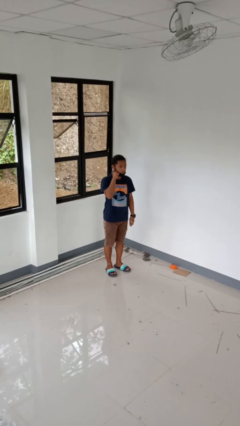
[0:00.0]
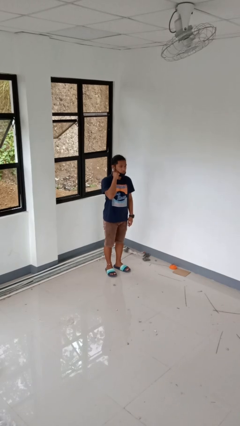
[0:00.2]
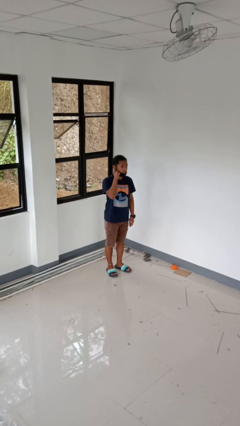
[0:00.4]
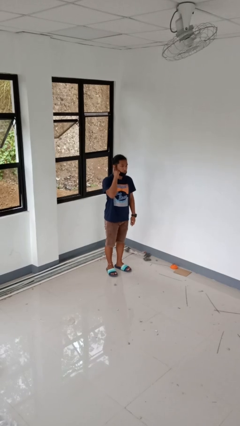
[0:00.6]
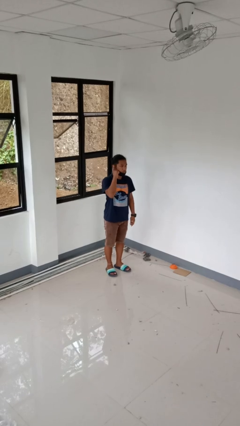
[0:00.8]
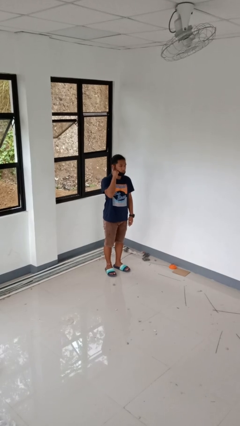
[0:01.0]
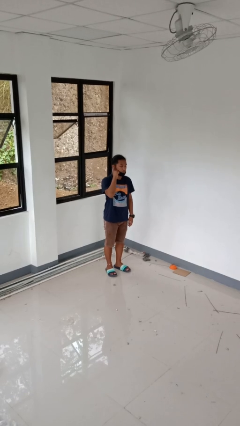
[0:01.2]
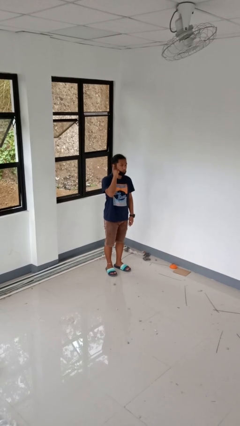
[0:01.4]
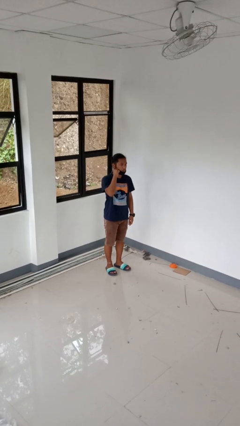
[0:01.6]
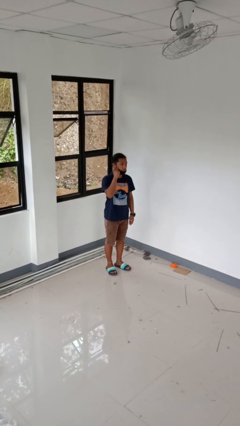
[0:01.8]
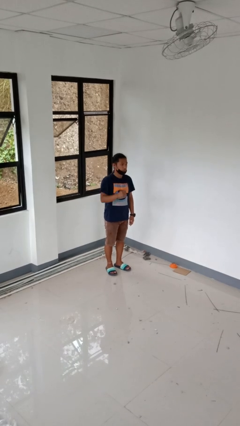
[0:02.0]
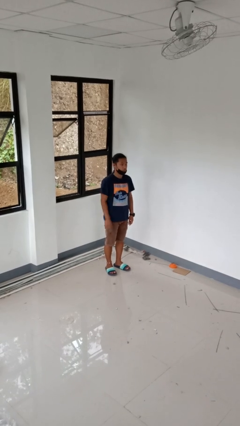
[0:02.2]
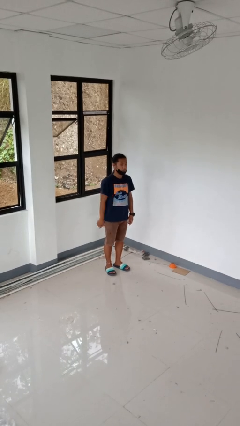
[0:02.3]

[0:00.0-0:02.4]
person gestures listen closely

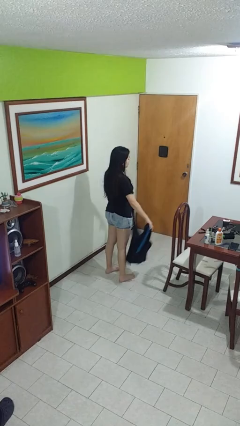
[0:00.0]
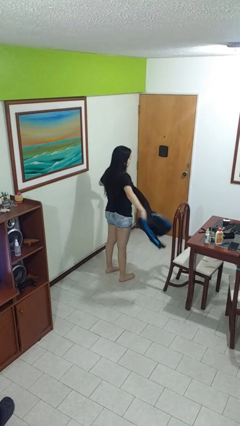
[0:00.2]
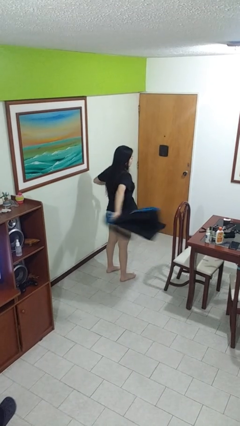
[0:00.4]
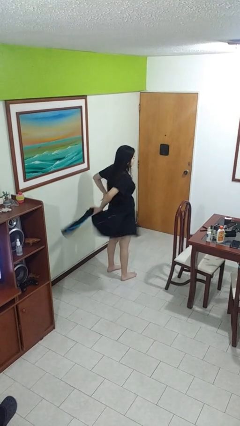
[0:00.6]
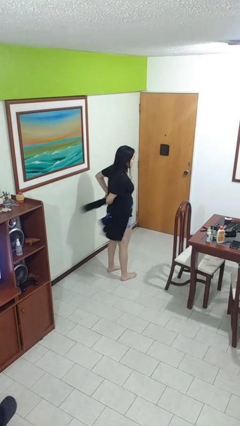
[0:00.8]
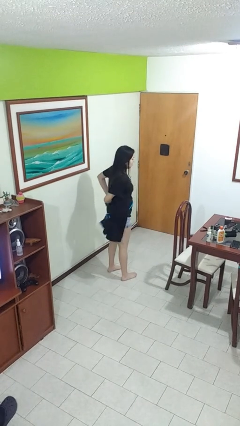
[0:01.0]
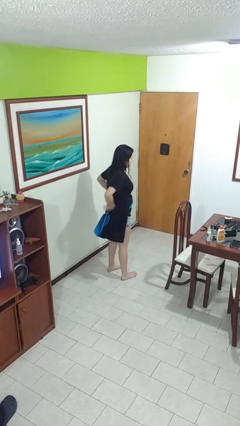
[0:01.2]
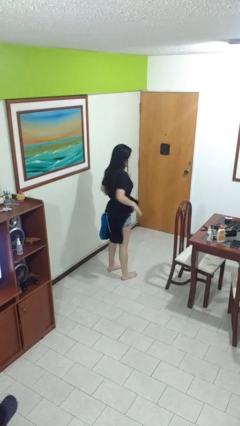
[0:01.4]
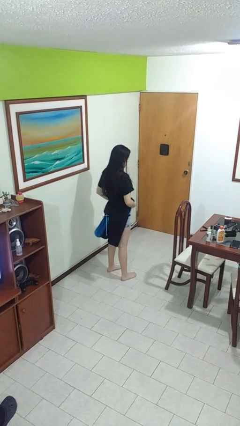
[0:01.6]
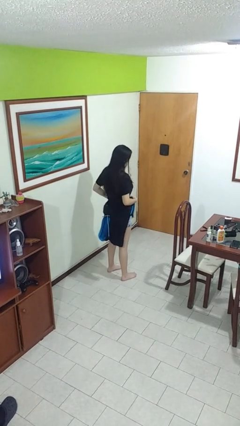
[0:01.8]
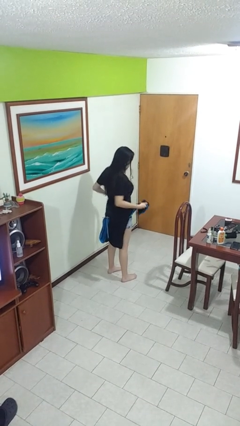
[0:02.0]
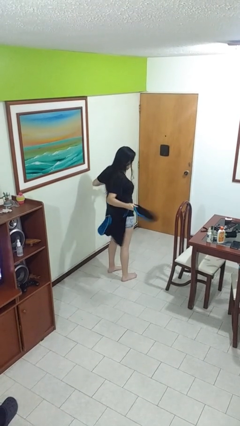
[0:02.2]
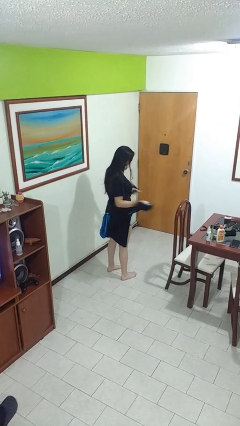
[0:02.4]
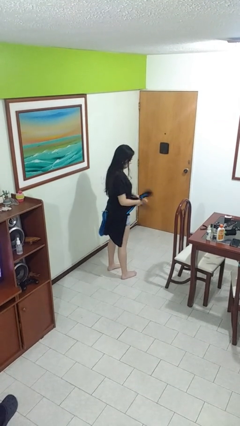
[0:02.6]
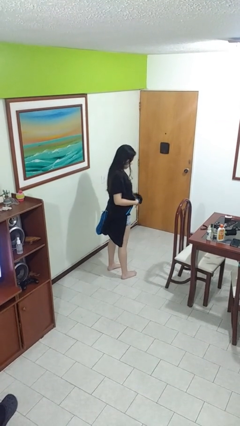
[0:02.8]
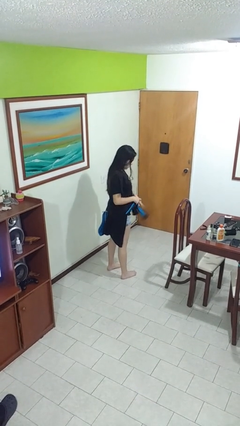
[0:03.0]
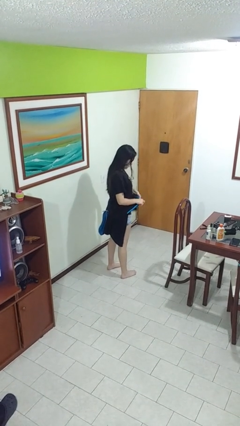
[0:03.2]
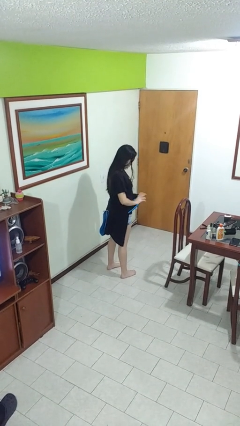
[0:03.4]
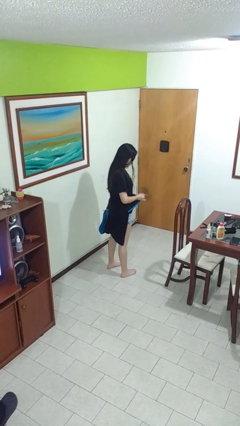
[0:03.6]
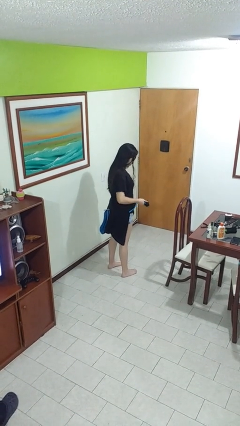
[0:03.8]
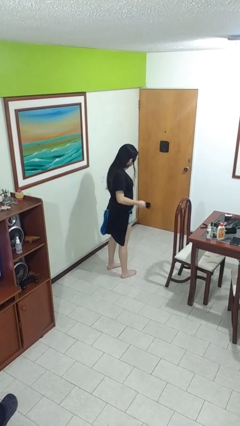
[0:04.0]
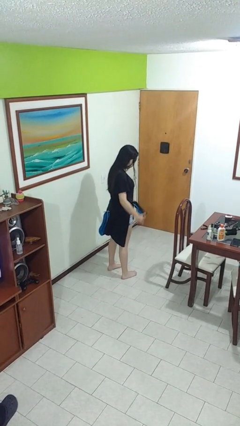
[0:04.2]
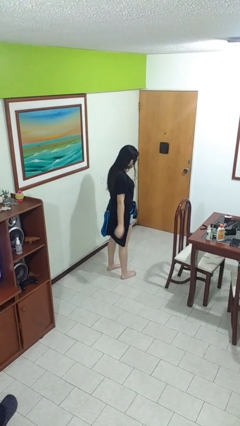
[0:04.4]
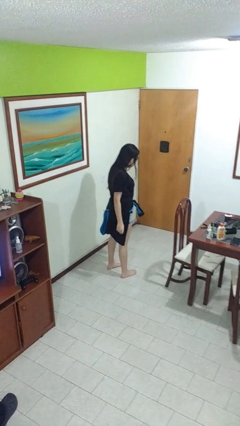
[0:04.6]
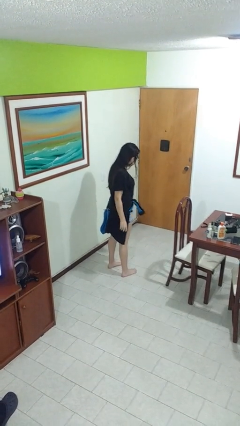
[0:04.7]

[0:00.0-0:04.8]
person ties jacket around waist

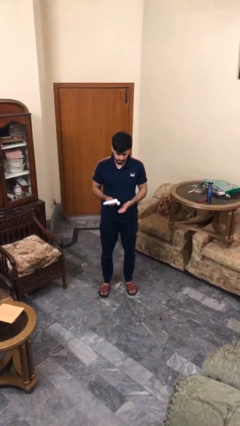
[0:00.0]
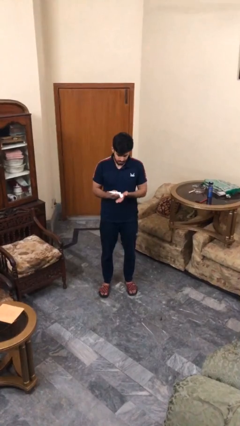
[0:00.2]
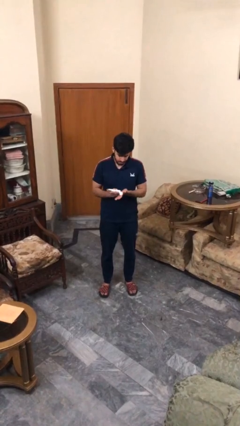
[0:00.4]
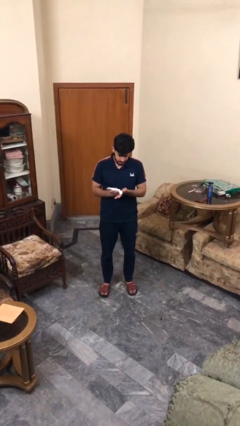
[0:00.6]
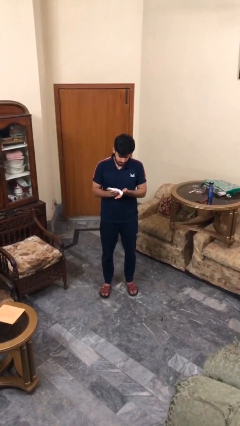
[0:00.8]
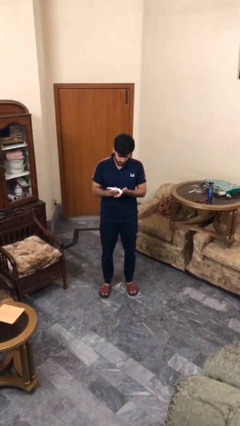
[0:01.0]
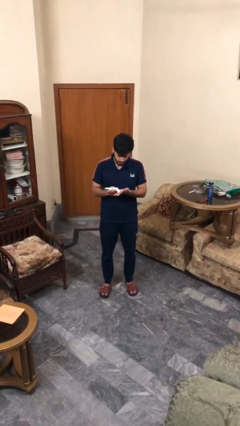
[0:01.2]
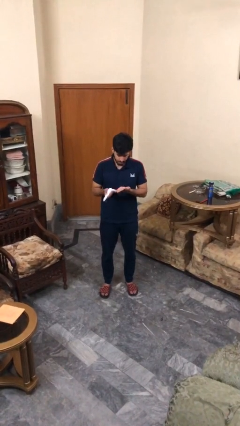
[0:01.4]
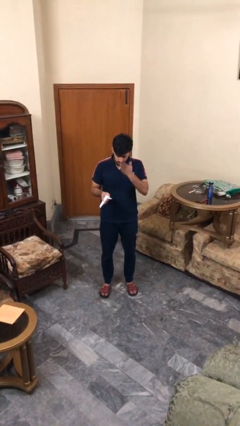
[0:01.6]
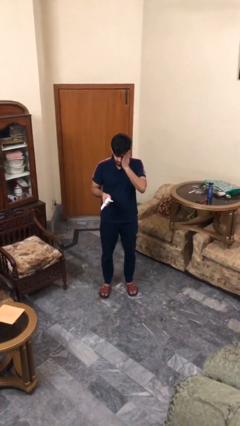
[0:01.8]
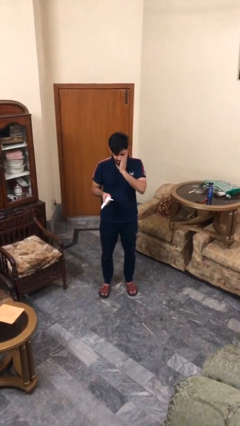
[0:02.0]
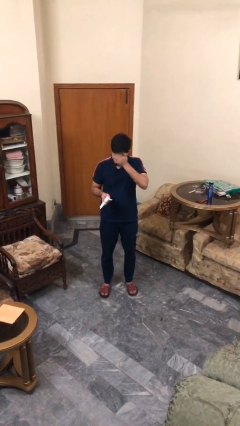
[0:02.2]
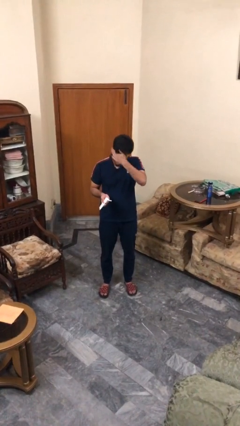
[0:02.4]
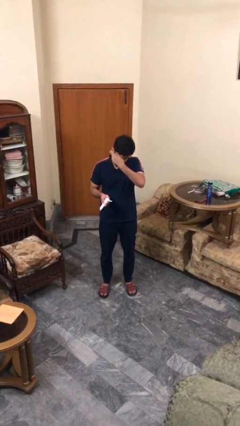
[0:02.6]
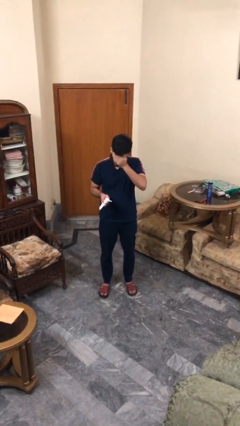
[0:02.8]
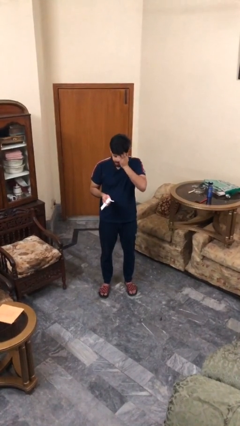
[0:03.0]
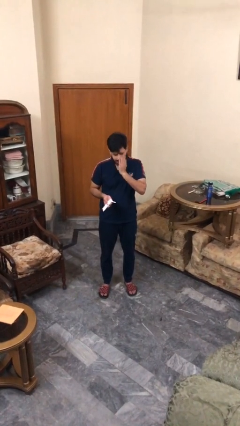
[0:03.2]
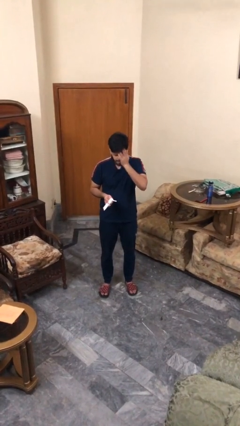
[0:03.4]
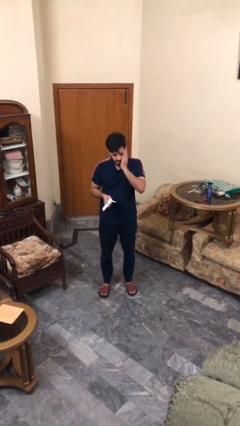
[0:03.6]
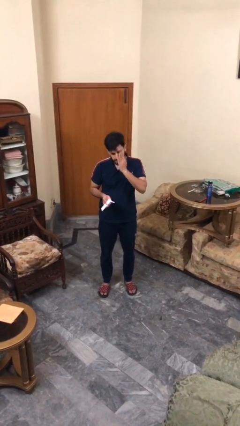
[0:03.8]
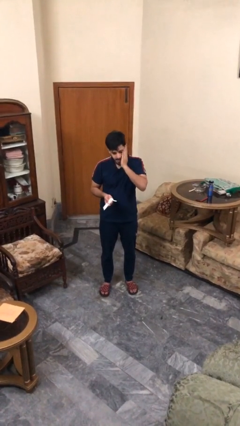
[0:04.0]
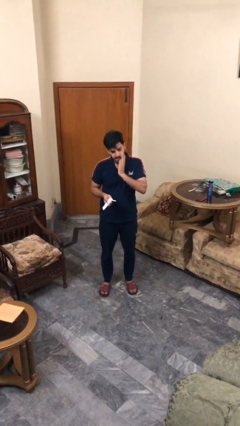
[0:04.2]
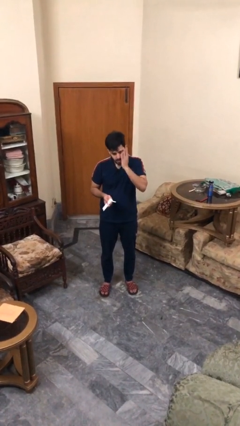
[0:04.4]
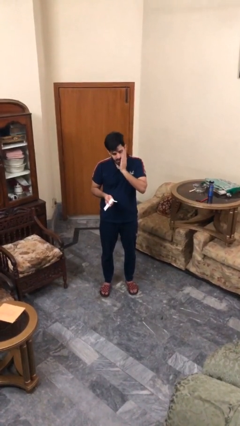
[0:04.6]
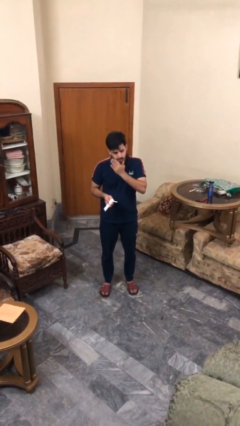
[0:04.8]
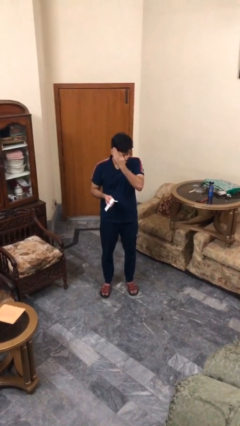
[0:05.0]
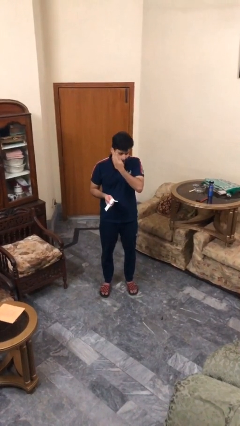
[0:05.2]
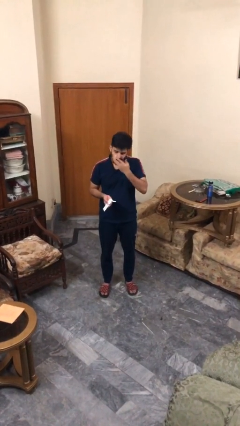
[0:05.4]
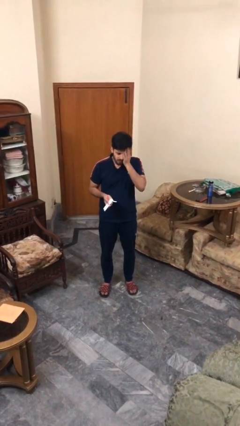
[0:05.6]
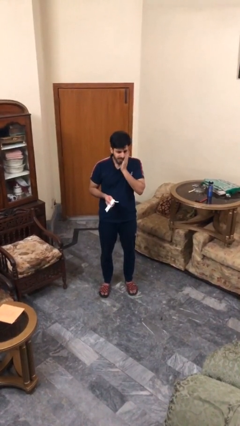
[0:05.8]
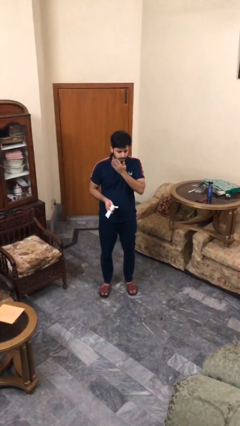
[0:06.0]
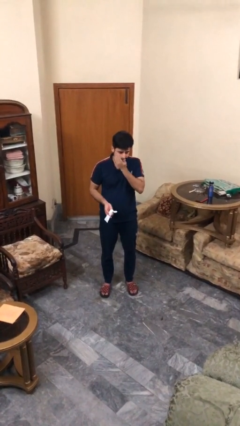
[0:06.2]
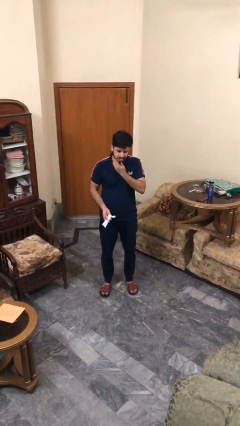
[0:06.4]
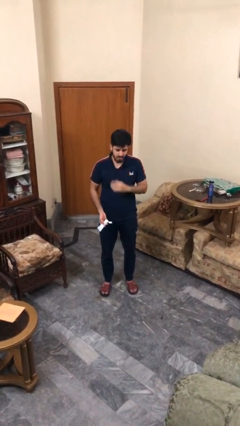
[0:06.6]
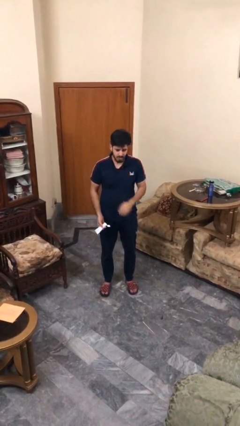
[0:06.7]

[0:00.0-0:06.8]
person applies facial moisturizer

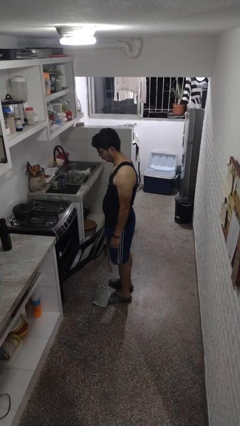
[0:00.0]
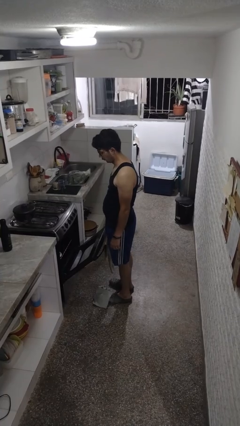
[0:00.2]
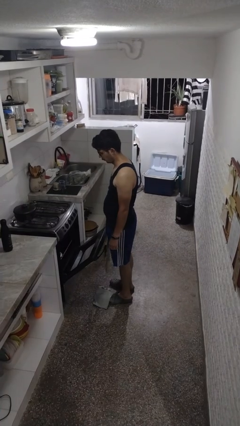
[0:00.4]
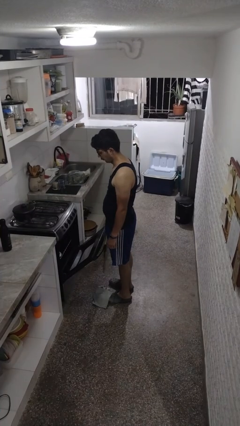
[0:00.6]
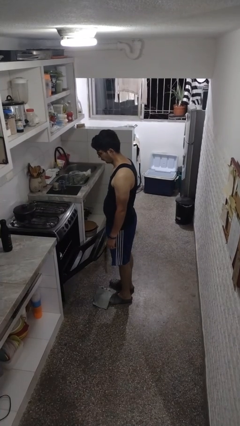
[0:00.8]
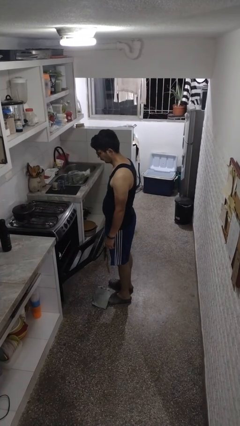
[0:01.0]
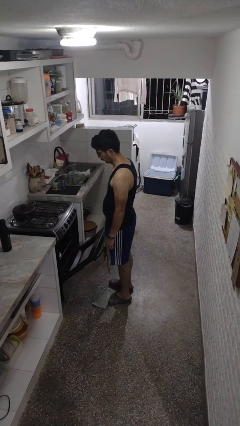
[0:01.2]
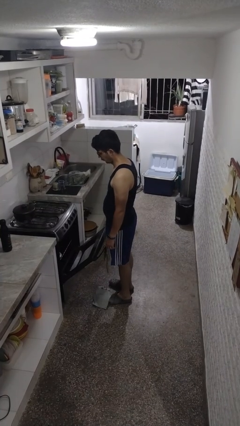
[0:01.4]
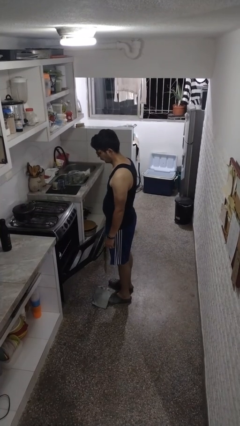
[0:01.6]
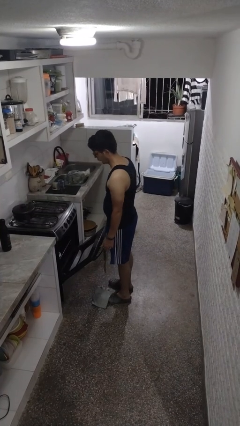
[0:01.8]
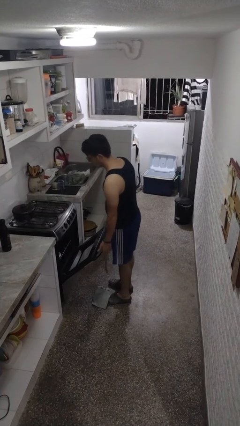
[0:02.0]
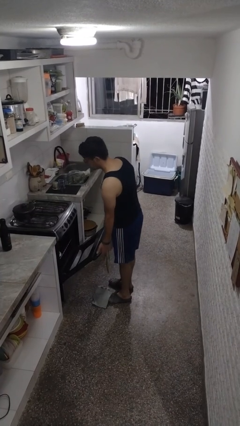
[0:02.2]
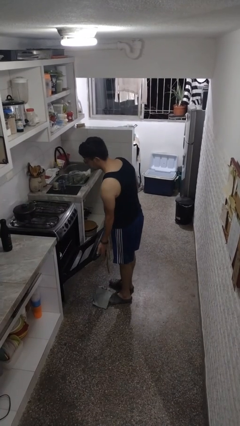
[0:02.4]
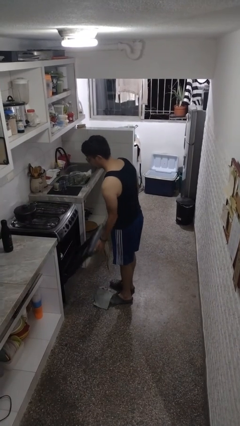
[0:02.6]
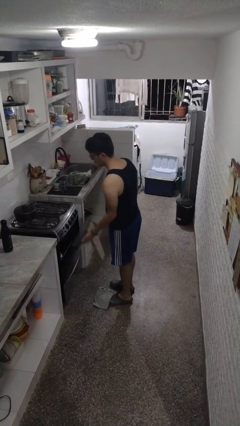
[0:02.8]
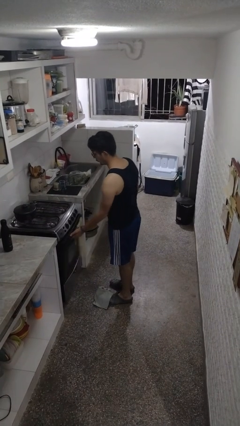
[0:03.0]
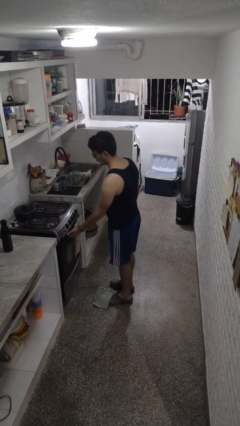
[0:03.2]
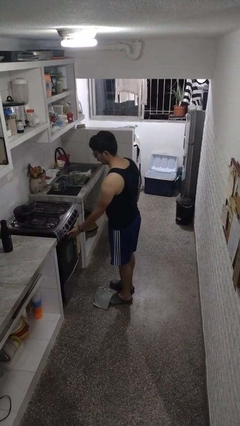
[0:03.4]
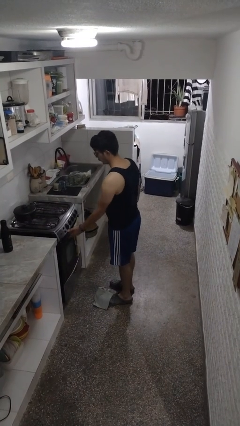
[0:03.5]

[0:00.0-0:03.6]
person closes oven door
